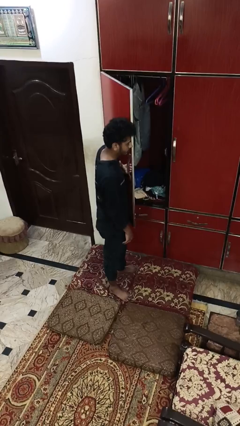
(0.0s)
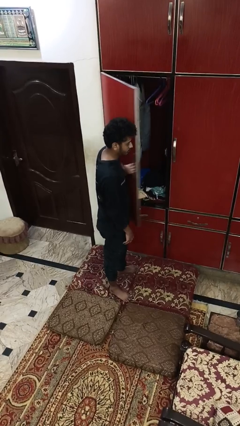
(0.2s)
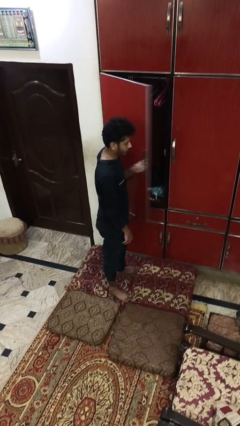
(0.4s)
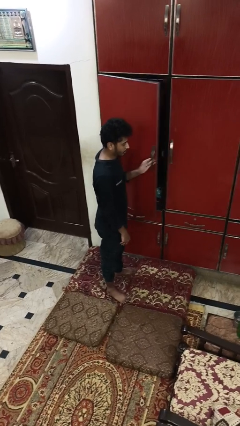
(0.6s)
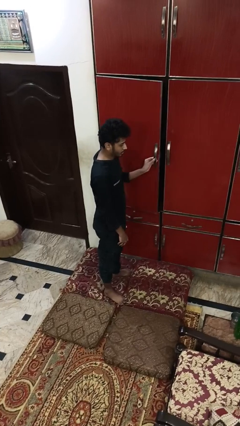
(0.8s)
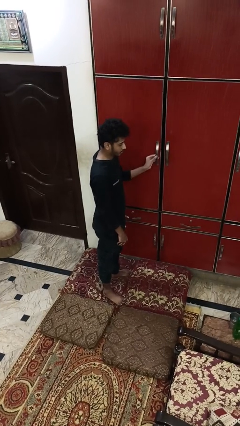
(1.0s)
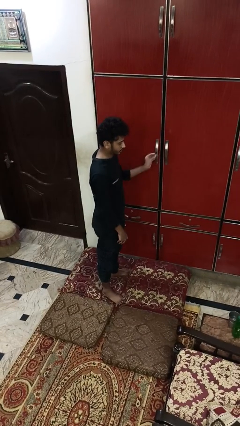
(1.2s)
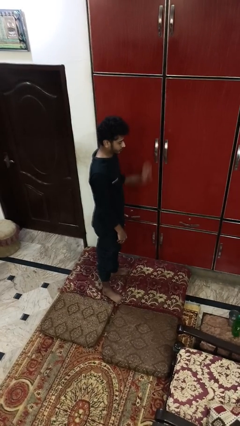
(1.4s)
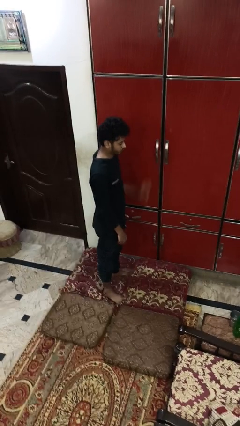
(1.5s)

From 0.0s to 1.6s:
person closes closet door

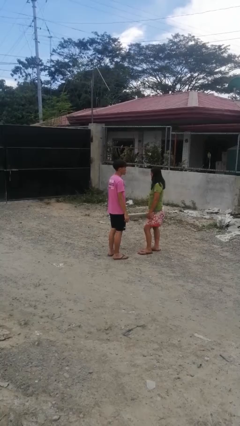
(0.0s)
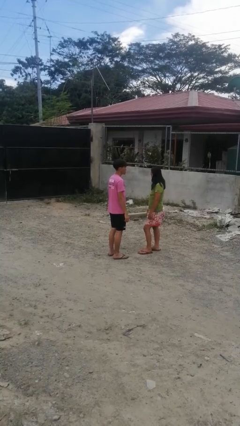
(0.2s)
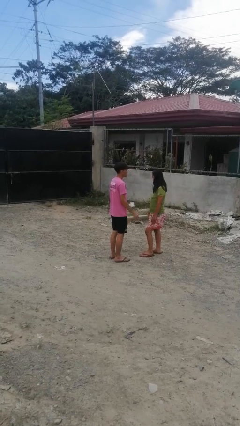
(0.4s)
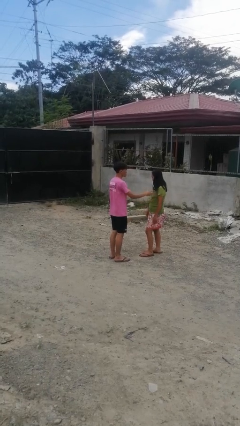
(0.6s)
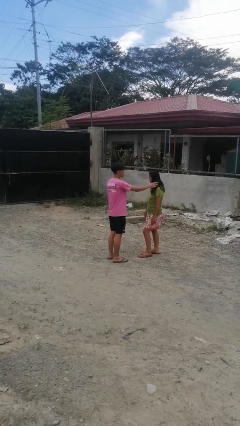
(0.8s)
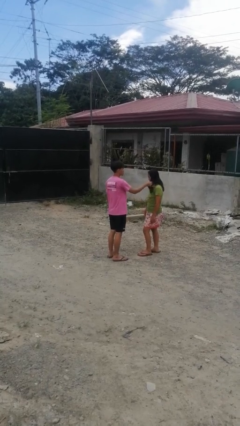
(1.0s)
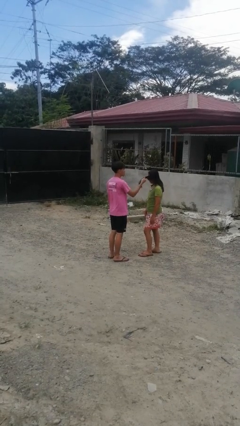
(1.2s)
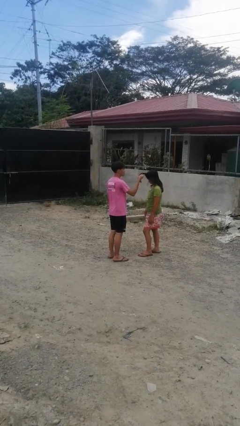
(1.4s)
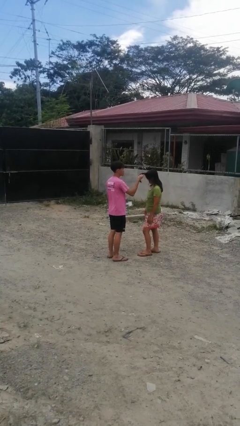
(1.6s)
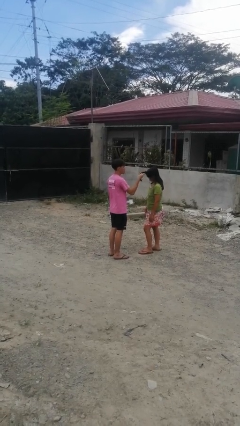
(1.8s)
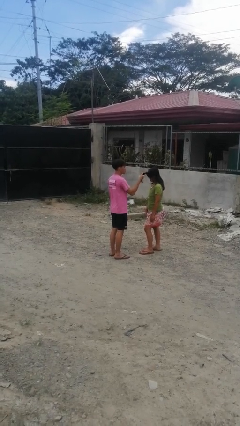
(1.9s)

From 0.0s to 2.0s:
person grabs person by hair

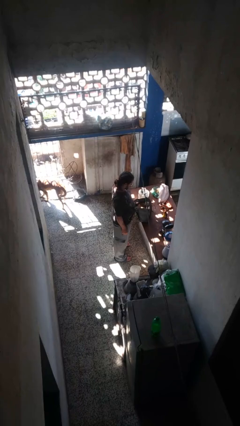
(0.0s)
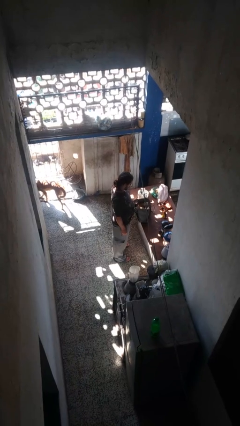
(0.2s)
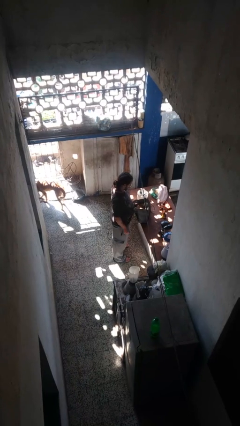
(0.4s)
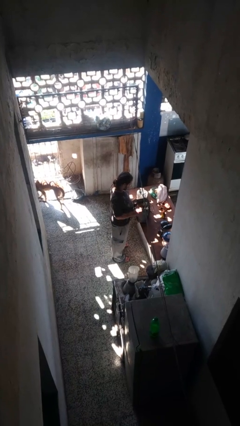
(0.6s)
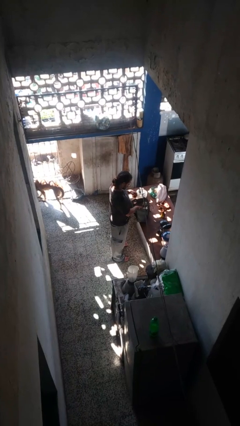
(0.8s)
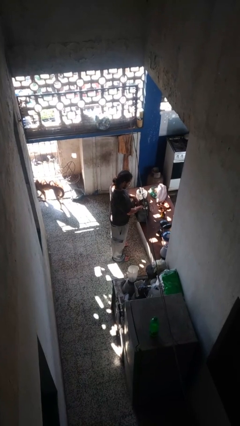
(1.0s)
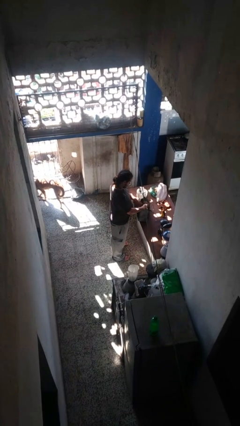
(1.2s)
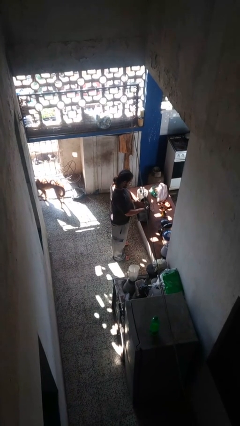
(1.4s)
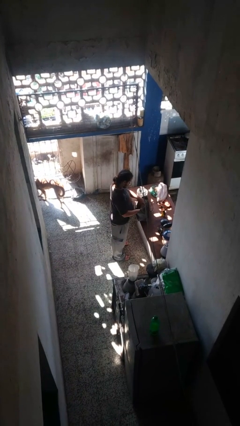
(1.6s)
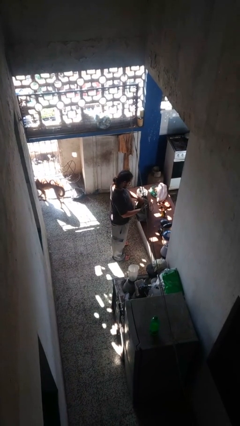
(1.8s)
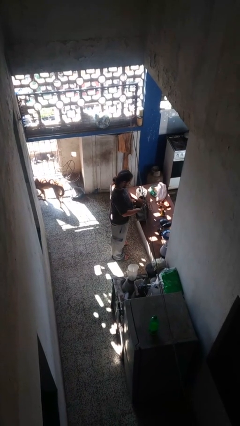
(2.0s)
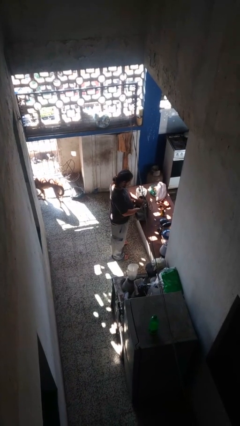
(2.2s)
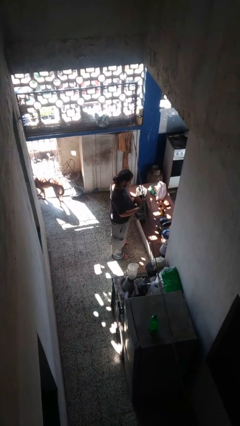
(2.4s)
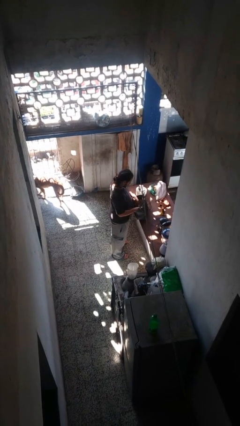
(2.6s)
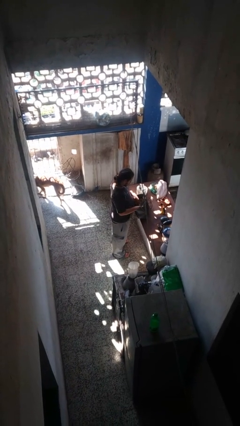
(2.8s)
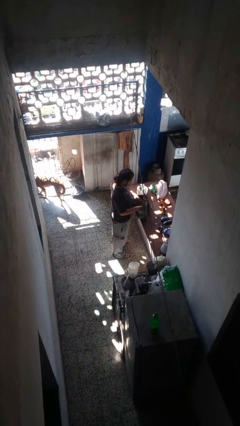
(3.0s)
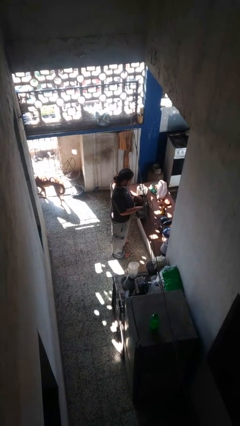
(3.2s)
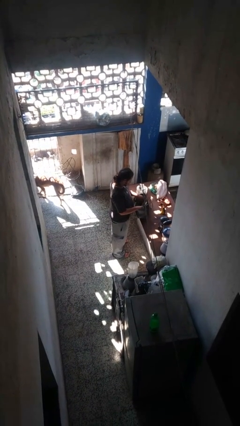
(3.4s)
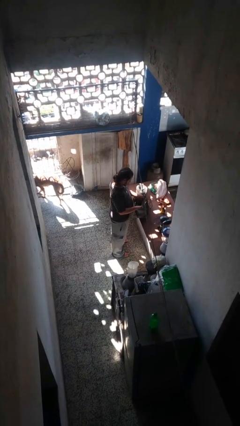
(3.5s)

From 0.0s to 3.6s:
person searches in purse

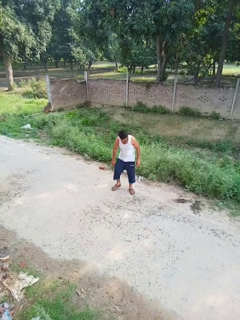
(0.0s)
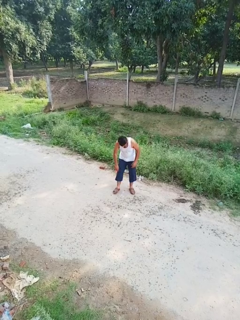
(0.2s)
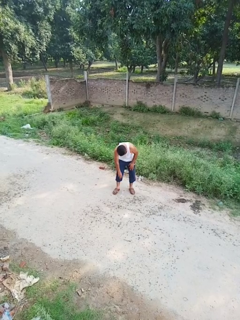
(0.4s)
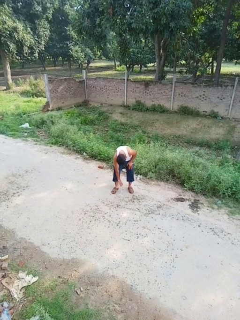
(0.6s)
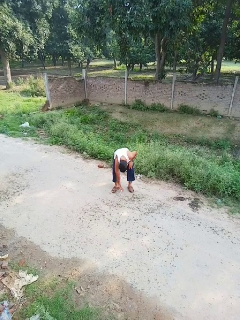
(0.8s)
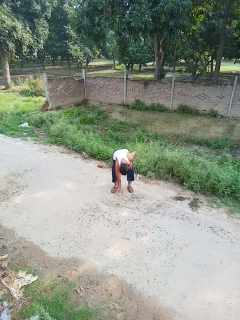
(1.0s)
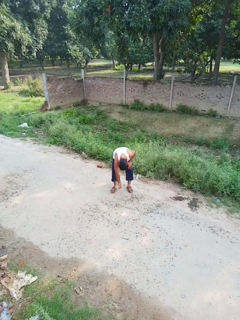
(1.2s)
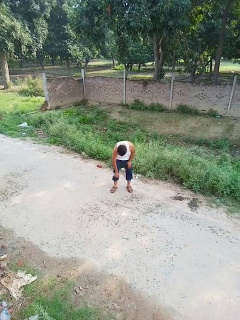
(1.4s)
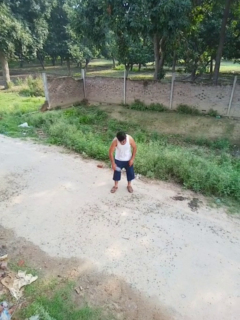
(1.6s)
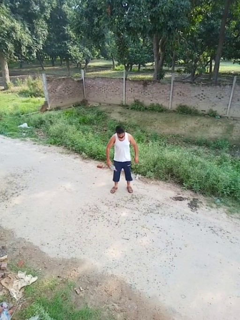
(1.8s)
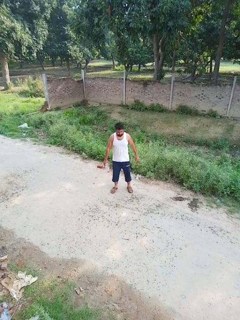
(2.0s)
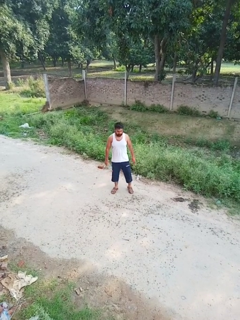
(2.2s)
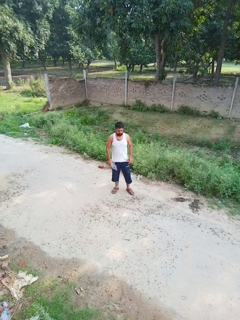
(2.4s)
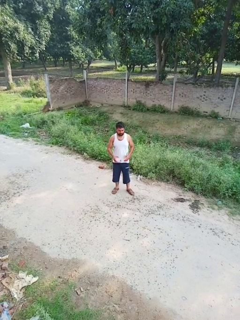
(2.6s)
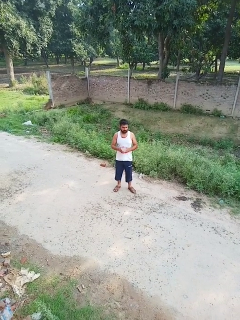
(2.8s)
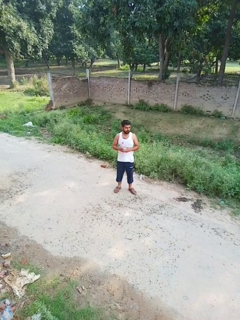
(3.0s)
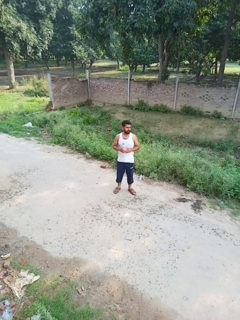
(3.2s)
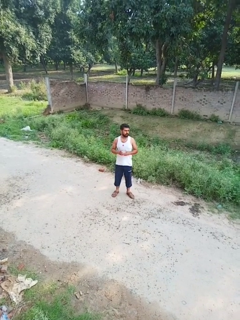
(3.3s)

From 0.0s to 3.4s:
person picks up object from floor

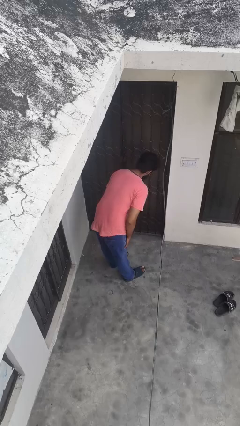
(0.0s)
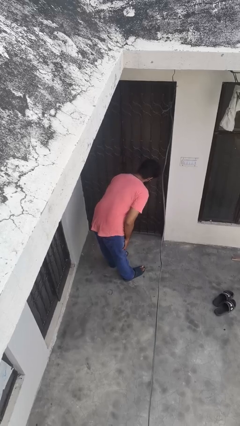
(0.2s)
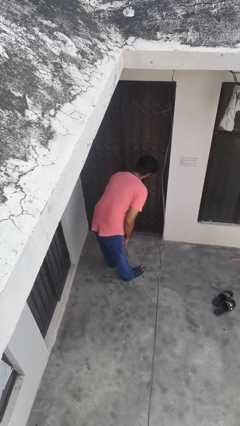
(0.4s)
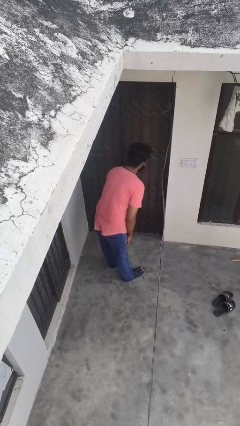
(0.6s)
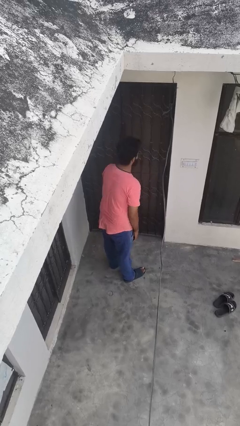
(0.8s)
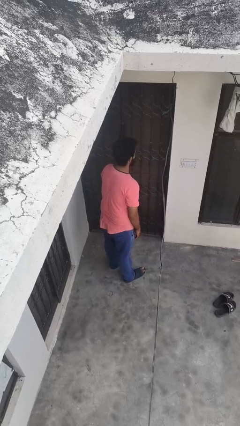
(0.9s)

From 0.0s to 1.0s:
person bows

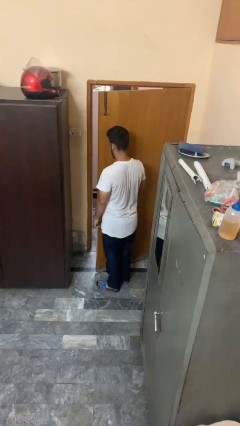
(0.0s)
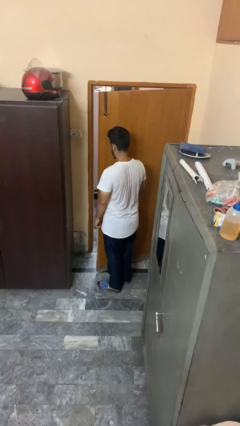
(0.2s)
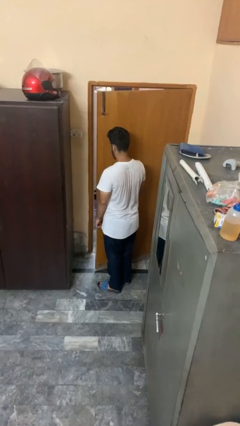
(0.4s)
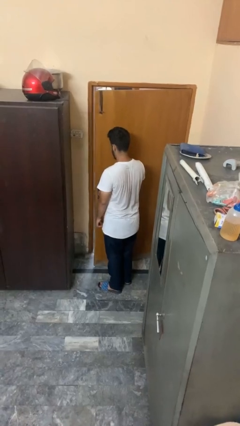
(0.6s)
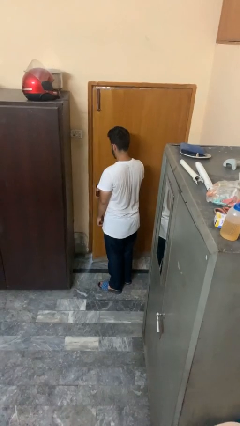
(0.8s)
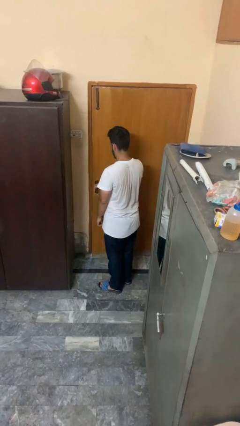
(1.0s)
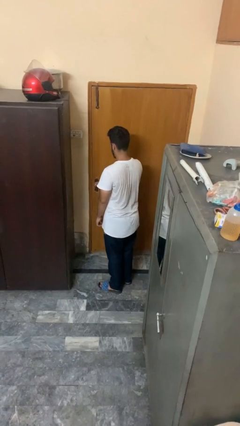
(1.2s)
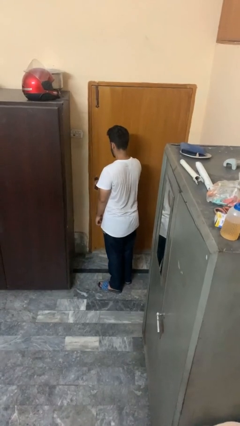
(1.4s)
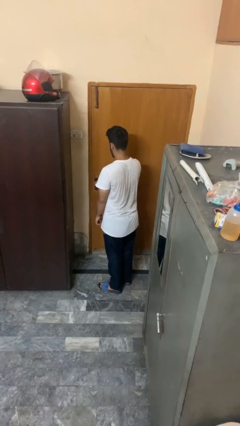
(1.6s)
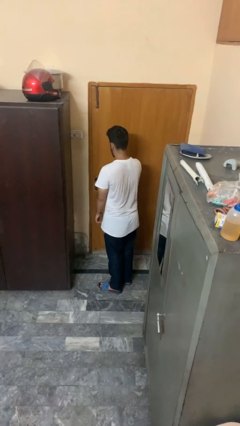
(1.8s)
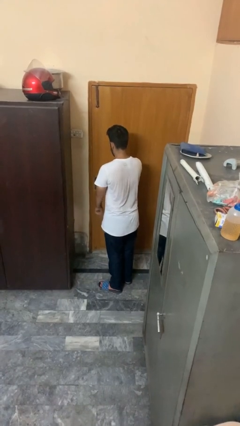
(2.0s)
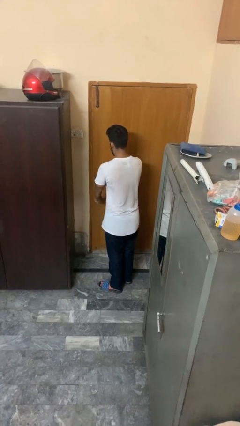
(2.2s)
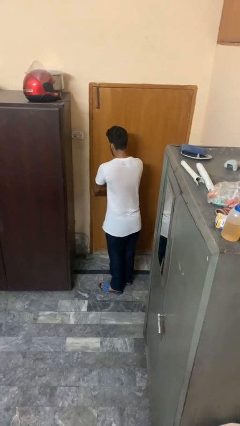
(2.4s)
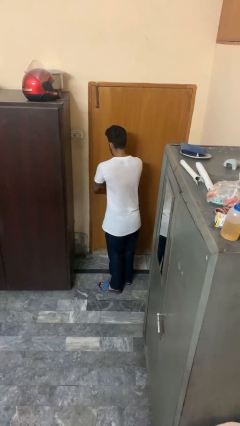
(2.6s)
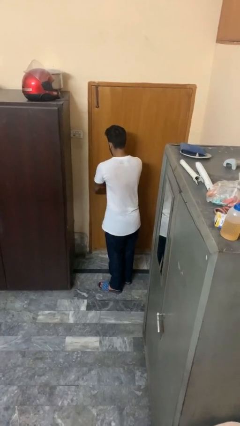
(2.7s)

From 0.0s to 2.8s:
person closes facility door

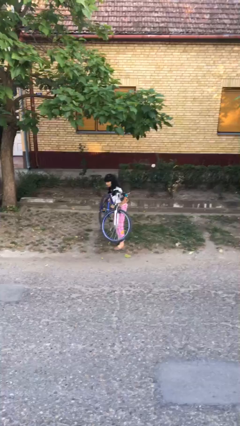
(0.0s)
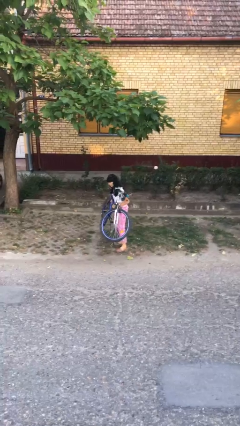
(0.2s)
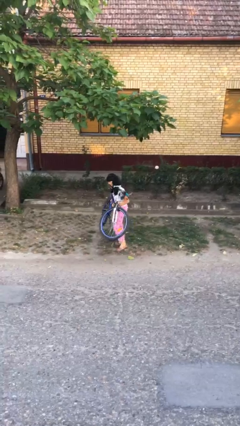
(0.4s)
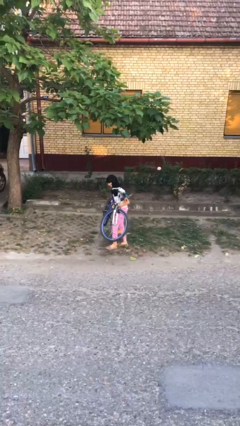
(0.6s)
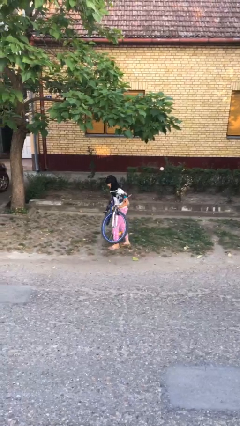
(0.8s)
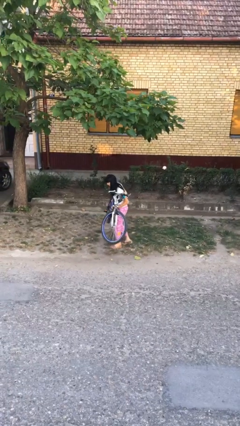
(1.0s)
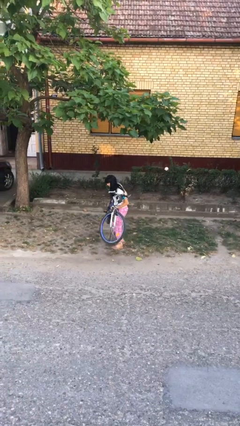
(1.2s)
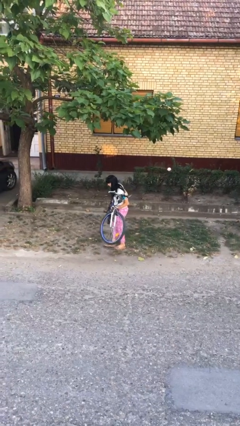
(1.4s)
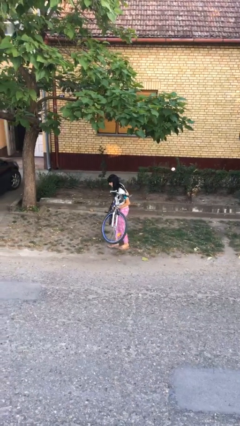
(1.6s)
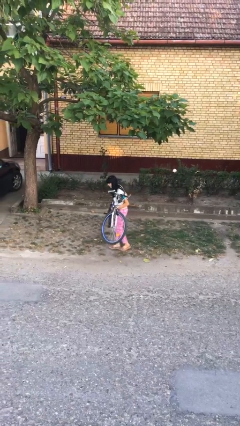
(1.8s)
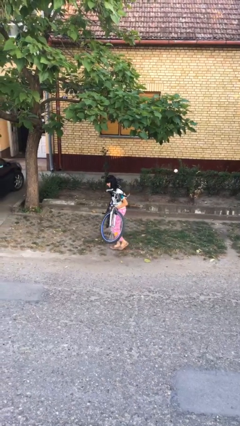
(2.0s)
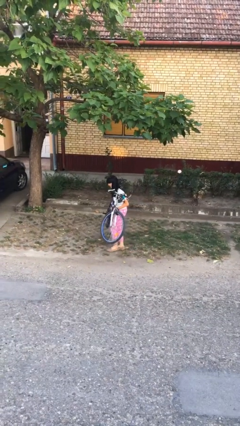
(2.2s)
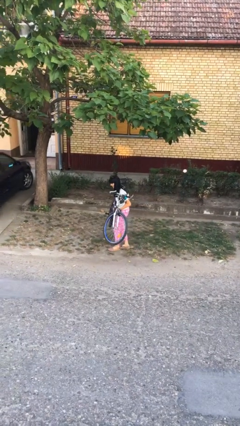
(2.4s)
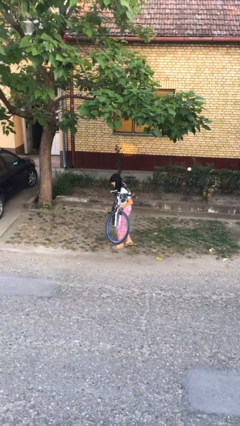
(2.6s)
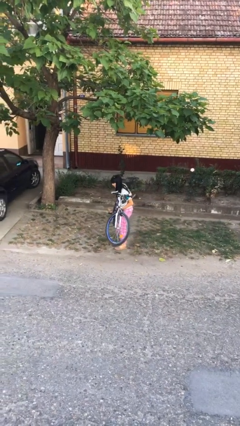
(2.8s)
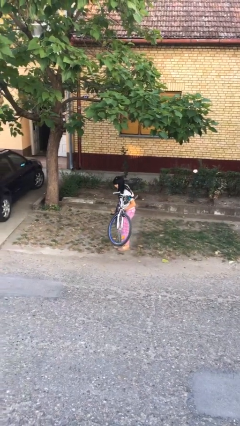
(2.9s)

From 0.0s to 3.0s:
person carries heavy object

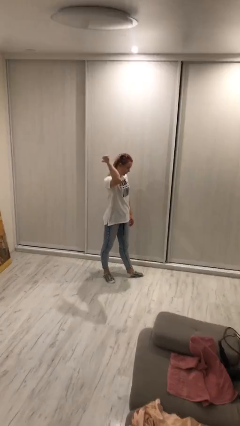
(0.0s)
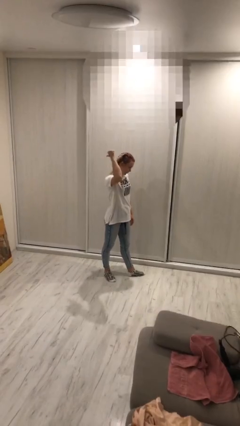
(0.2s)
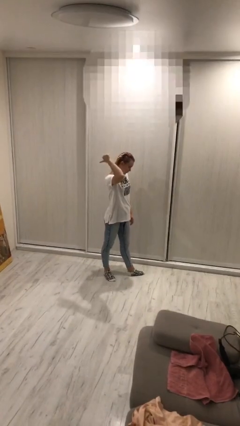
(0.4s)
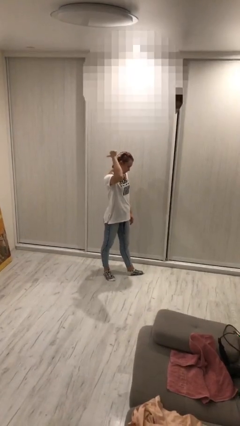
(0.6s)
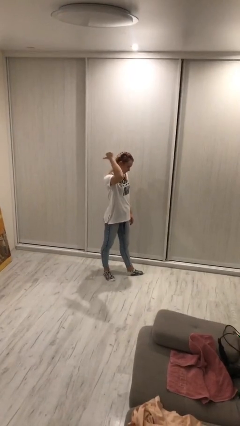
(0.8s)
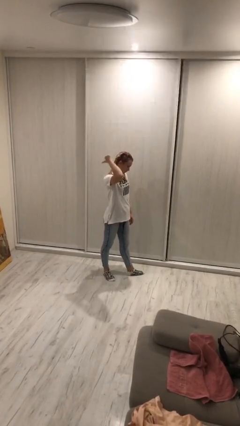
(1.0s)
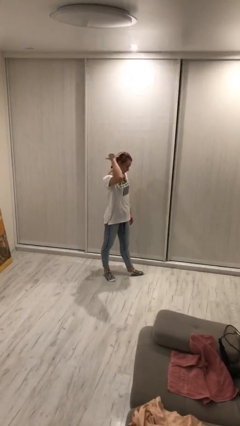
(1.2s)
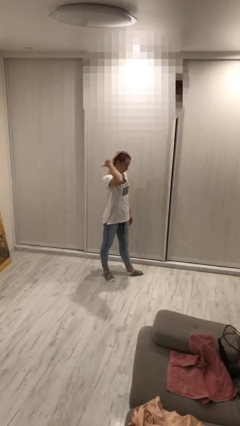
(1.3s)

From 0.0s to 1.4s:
person gestures behind me
